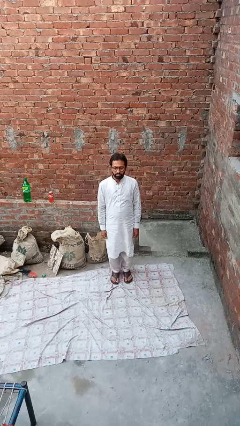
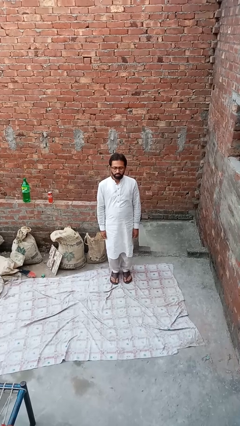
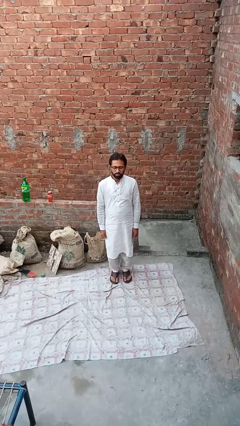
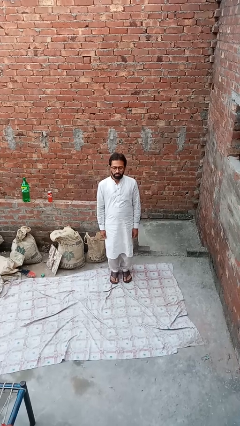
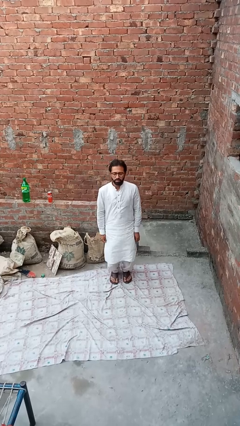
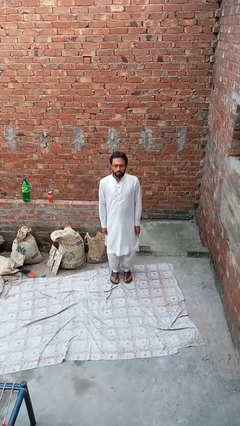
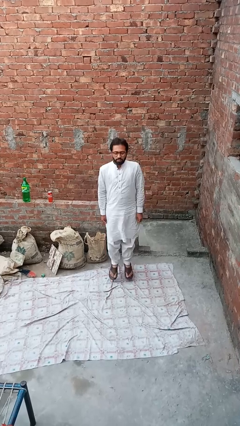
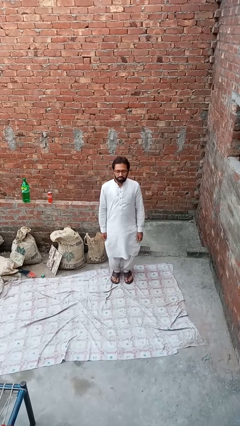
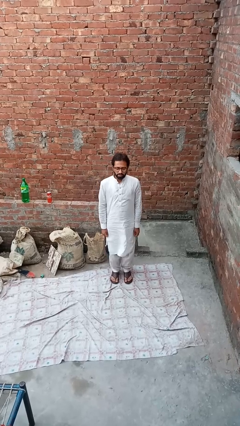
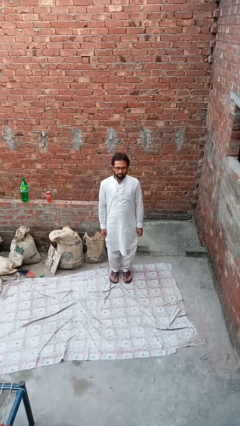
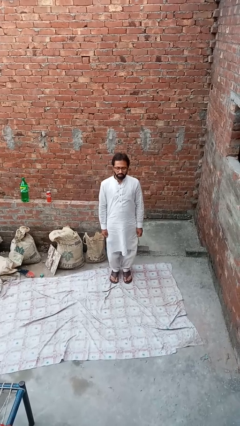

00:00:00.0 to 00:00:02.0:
person exercises with jumping jacks

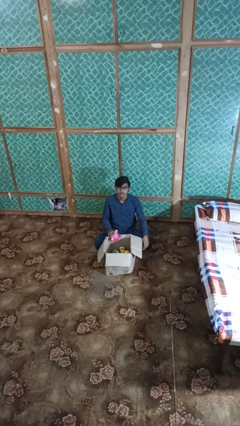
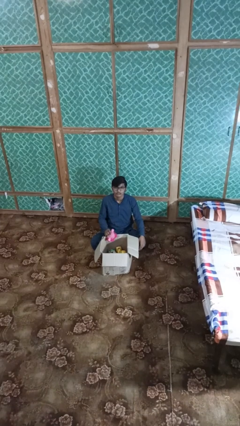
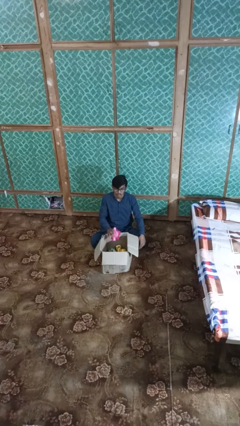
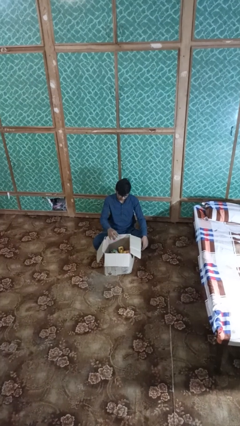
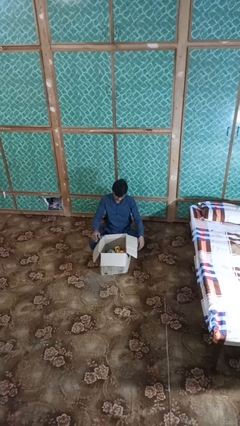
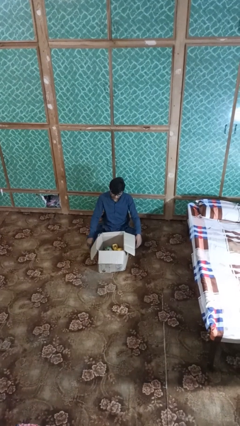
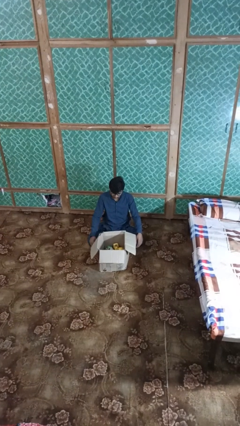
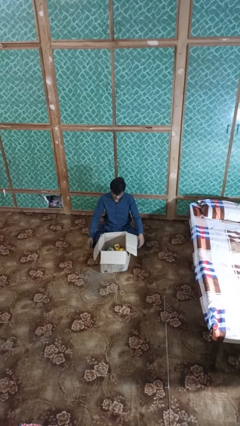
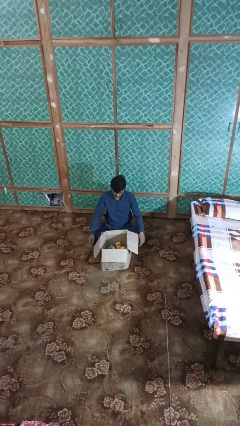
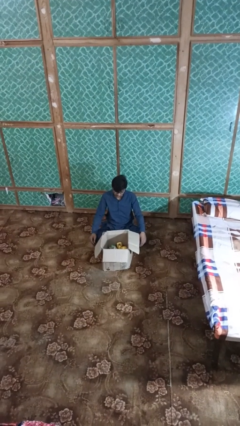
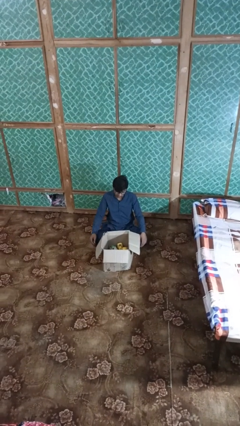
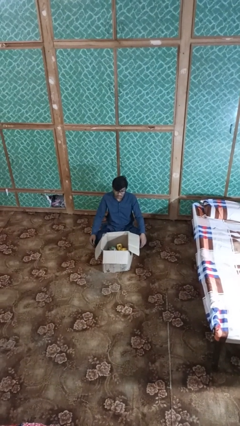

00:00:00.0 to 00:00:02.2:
person puts object into box

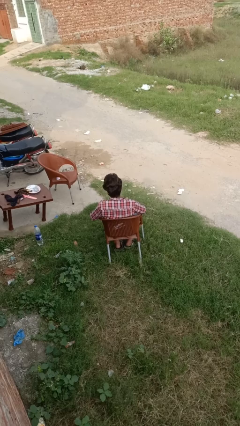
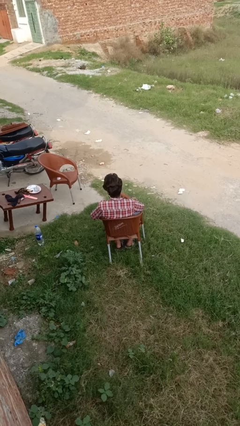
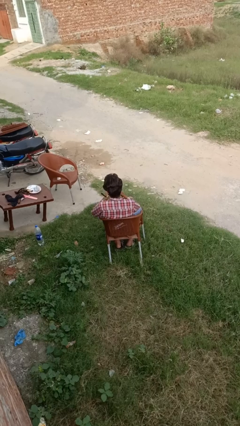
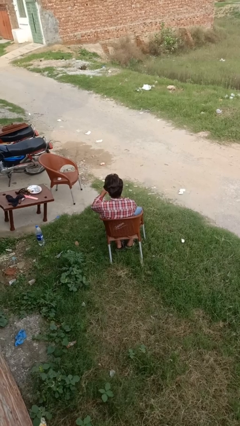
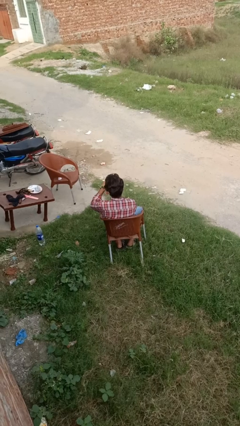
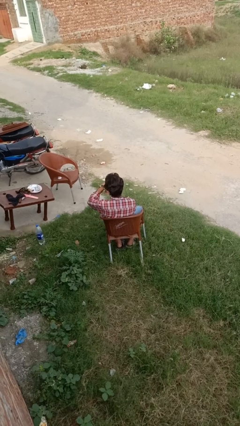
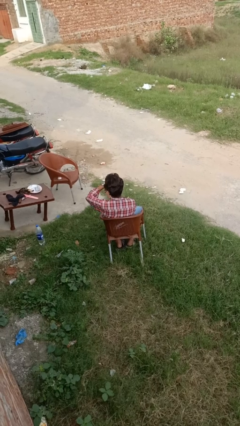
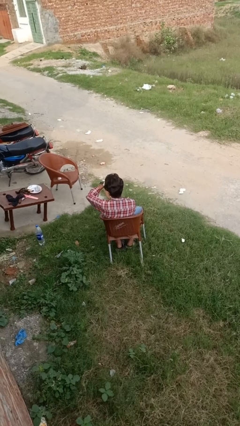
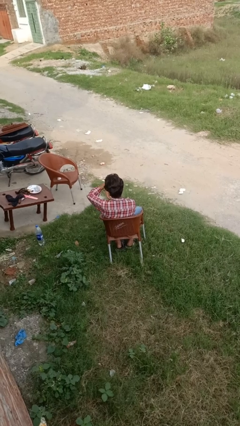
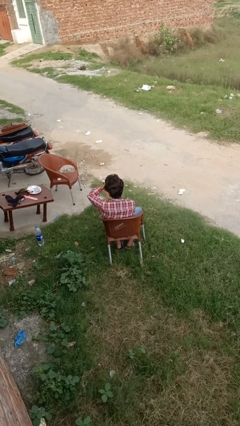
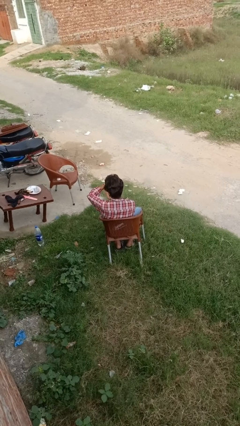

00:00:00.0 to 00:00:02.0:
person puts on wristwatch

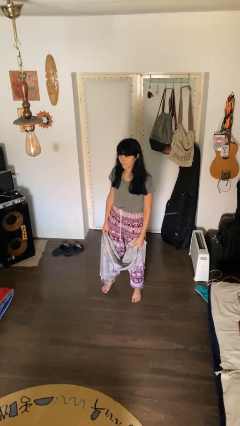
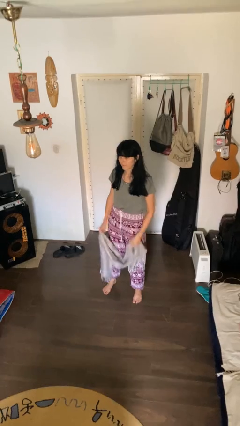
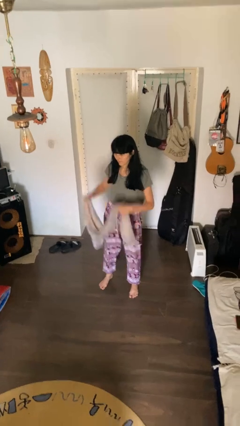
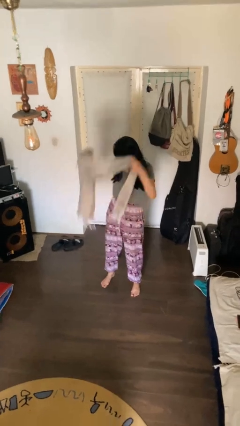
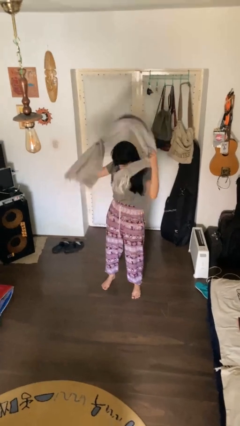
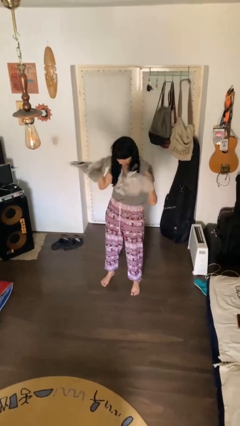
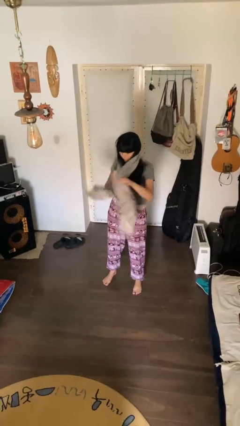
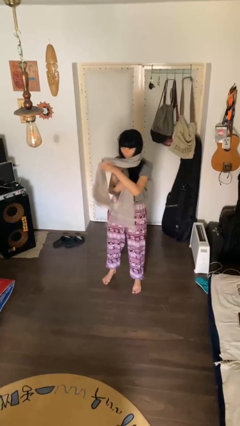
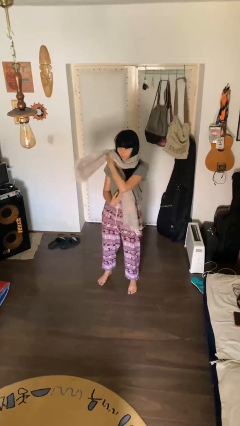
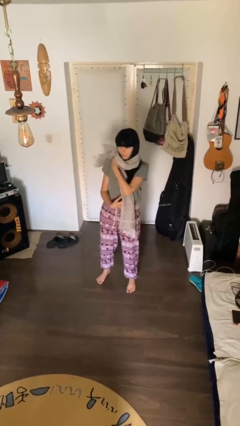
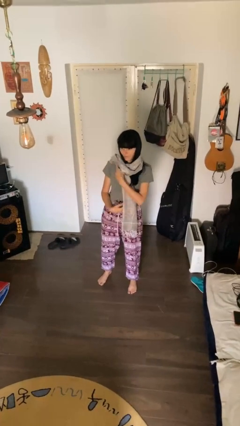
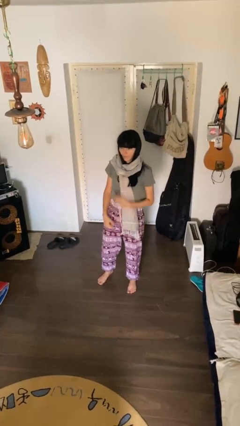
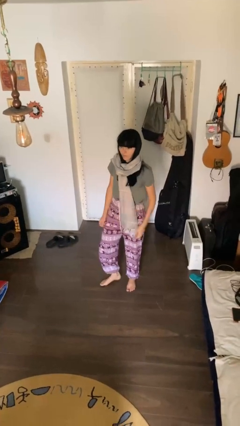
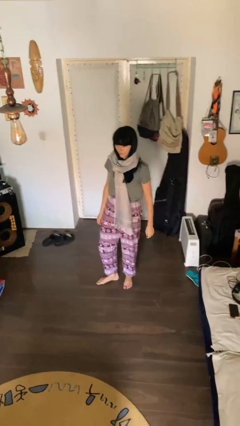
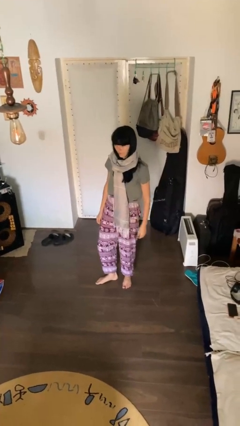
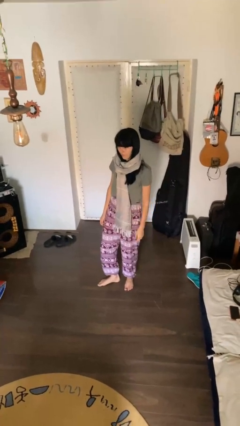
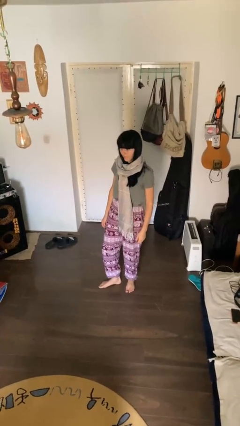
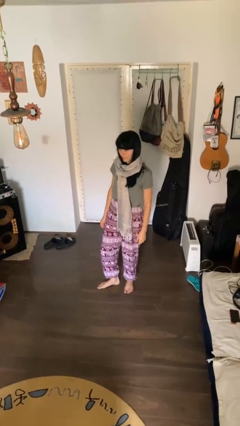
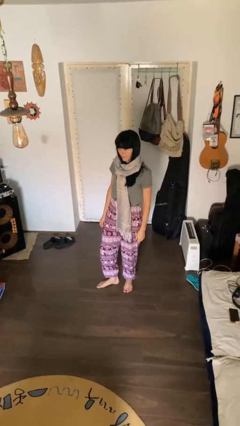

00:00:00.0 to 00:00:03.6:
person puts on scarf

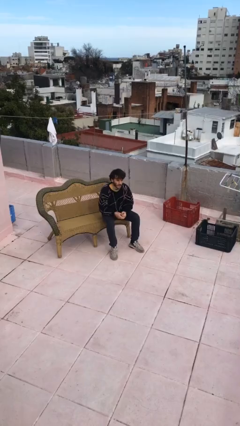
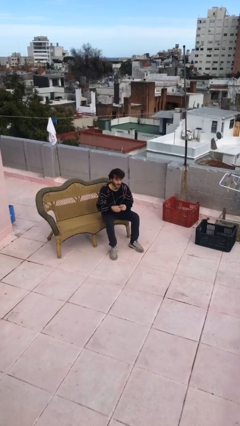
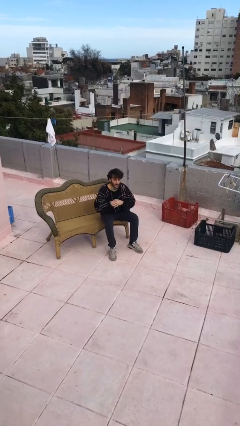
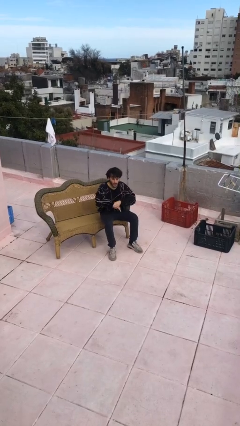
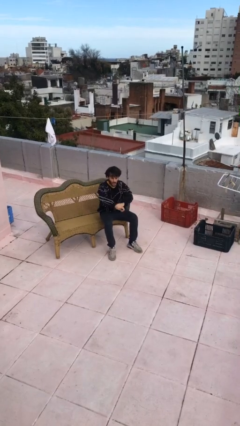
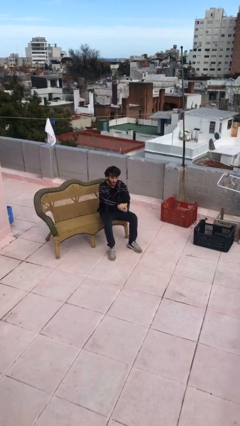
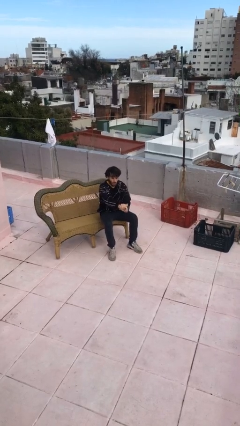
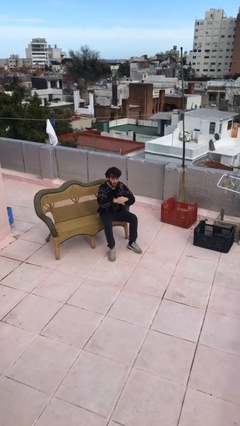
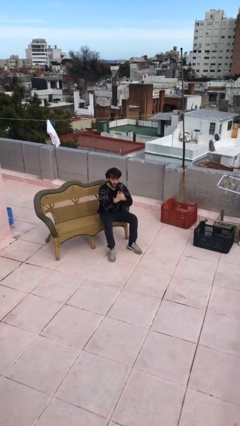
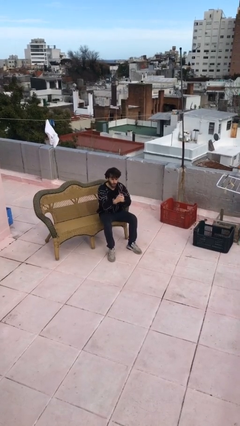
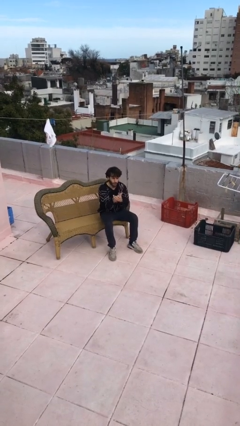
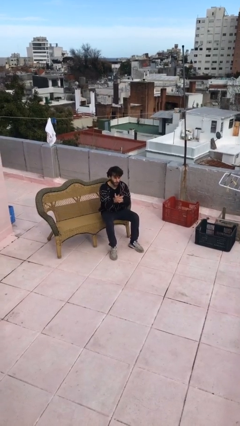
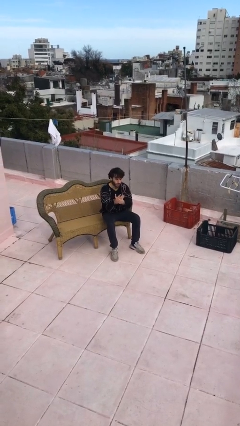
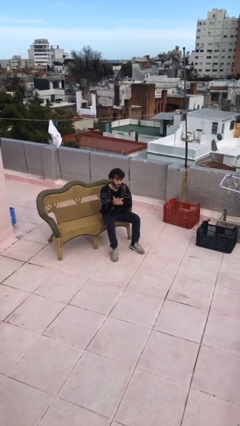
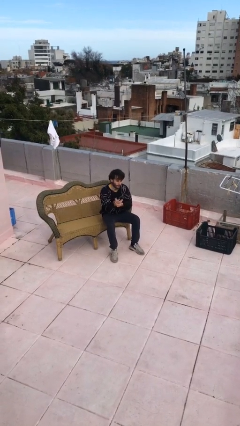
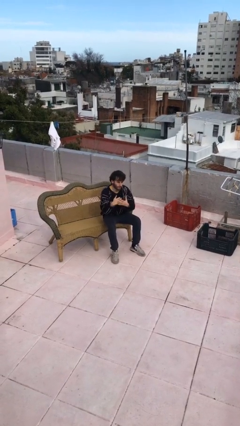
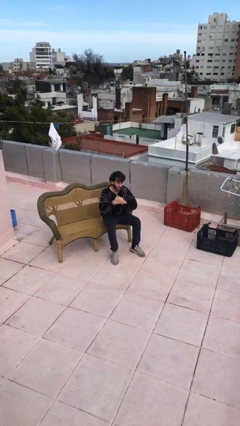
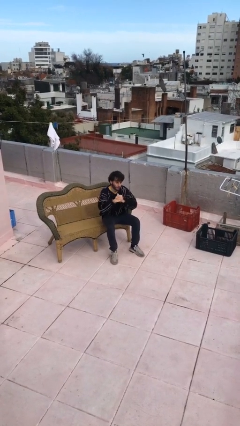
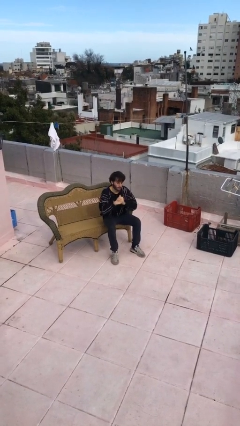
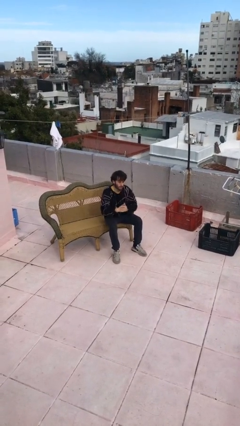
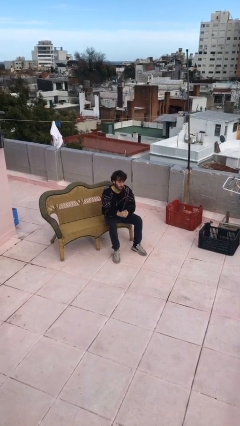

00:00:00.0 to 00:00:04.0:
person cracks knuckles

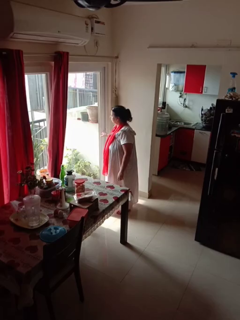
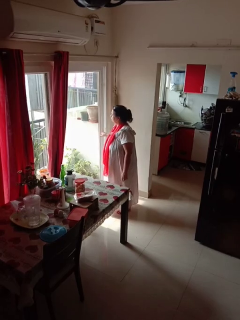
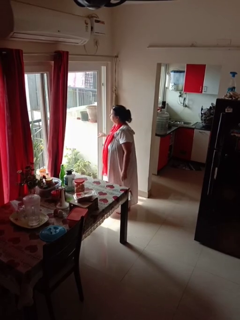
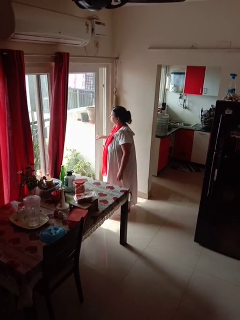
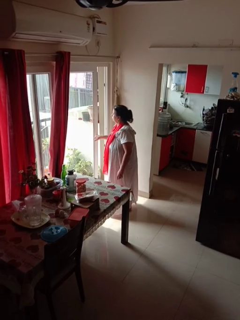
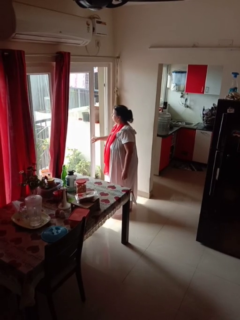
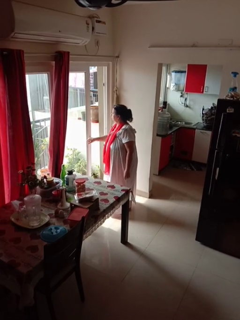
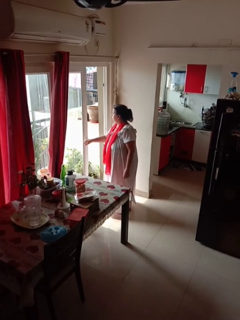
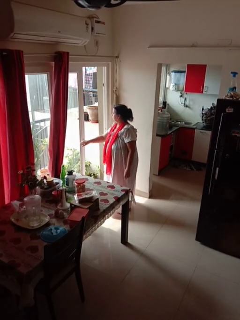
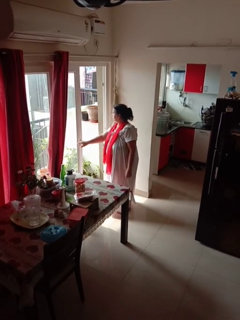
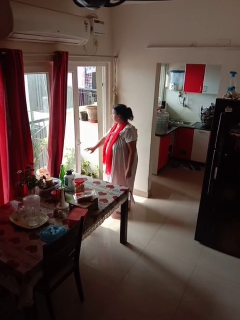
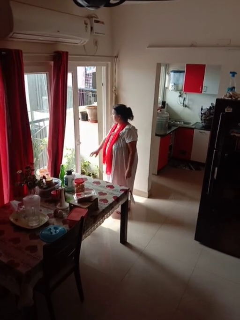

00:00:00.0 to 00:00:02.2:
person opens sliding door

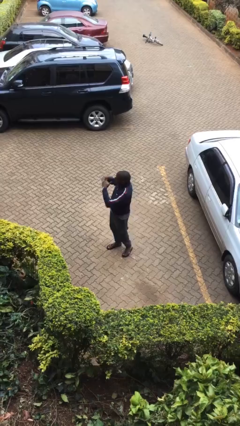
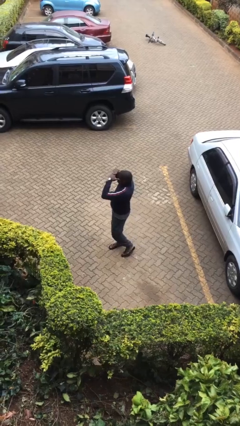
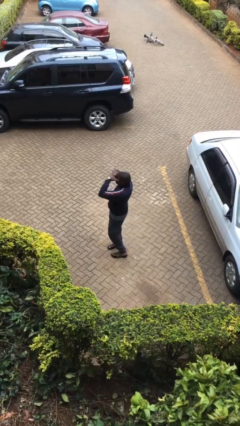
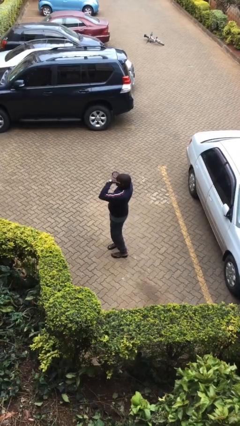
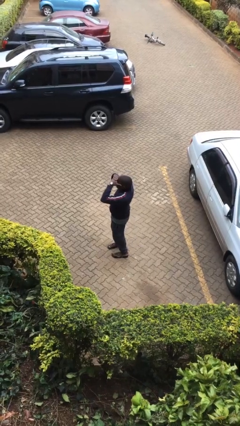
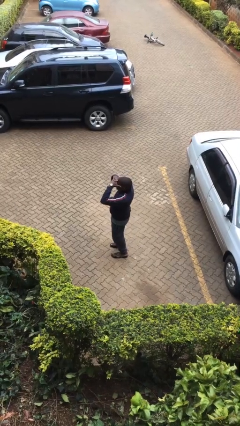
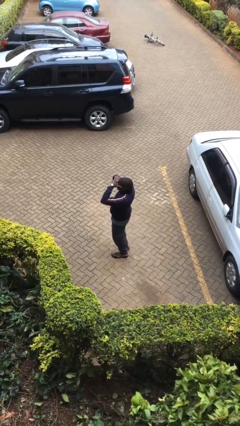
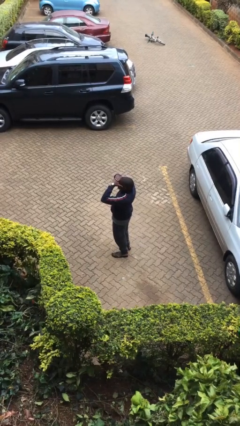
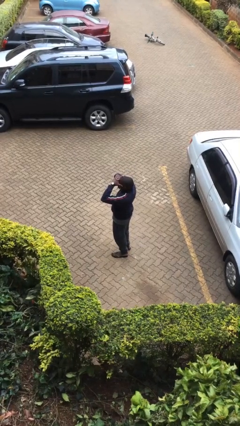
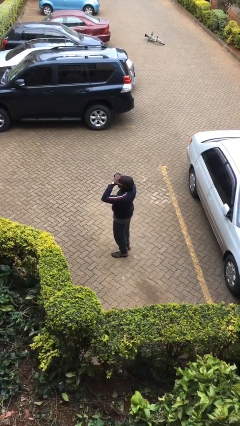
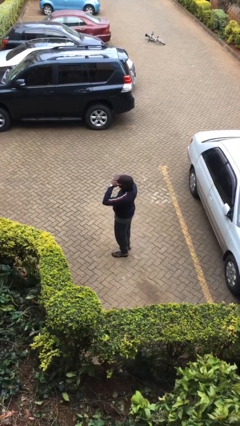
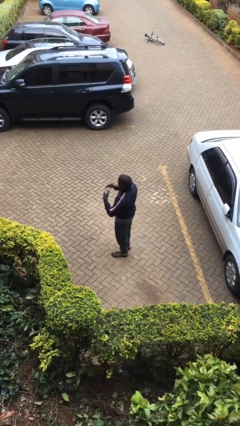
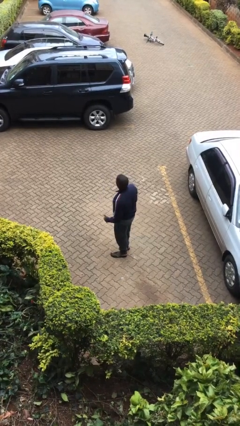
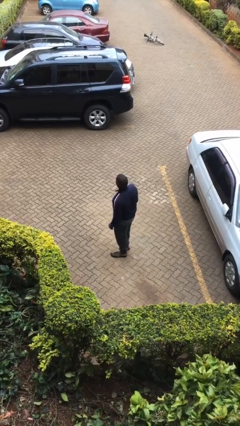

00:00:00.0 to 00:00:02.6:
person shades eyes
